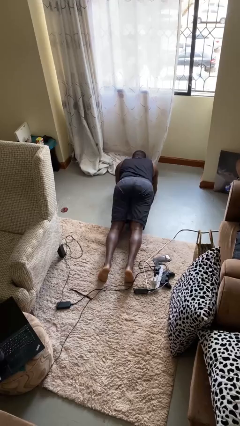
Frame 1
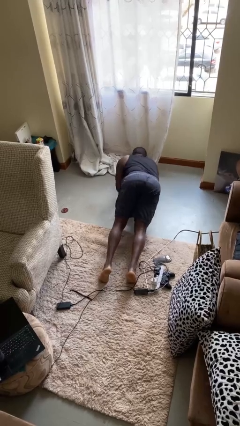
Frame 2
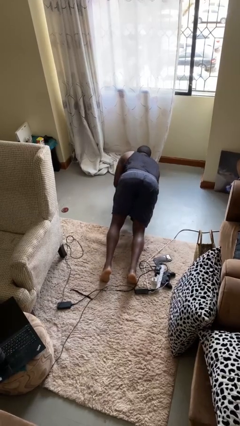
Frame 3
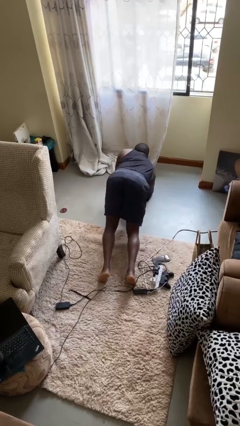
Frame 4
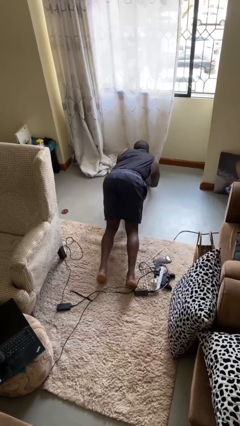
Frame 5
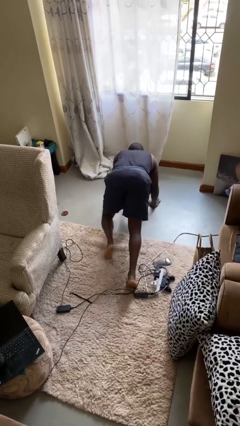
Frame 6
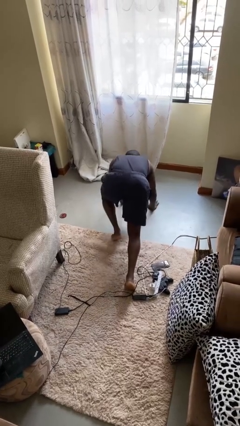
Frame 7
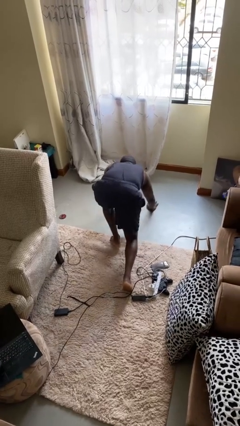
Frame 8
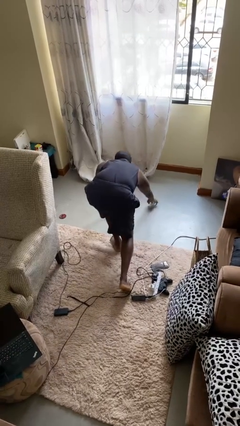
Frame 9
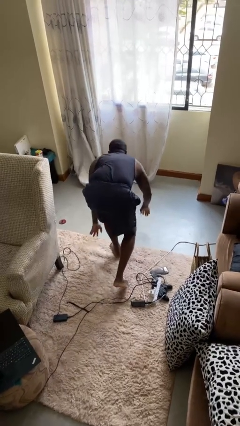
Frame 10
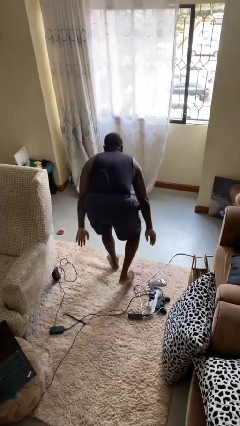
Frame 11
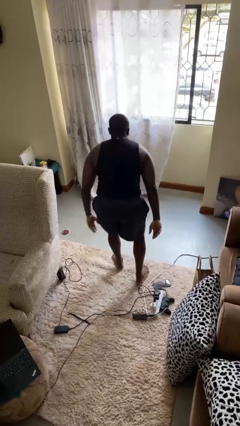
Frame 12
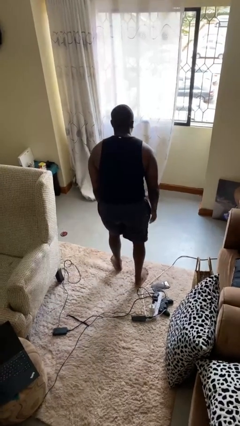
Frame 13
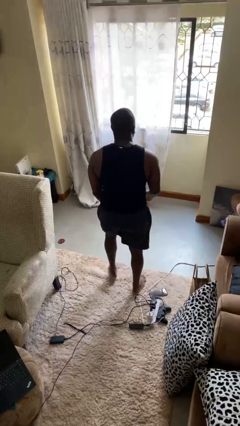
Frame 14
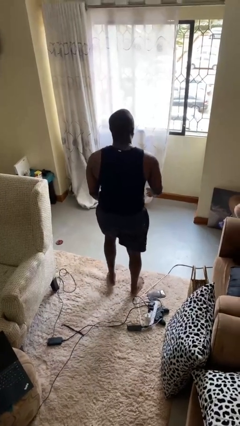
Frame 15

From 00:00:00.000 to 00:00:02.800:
person stands up from floor

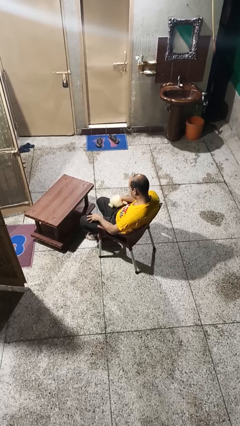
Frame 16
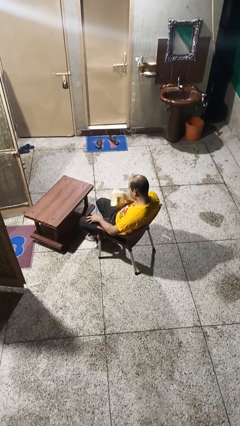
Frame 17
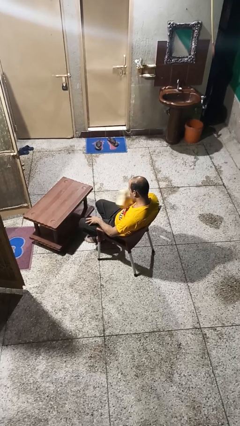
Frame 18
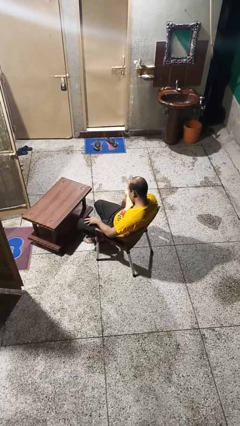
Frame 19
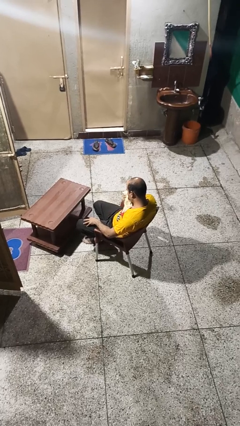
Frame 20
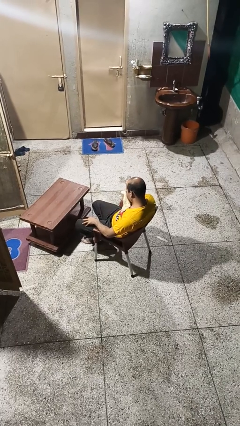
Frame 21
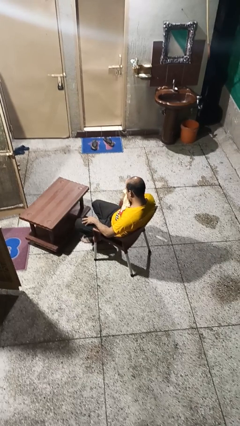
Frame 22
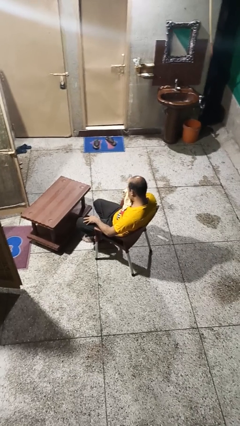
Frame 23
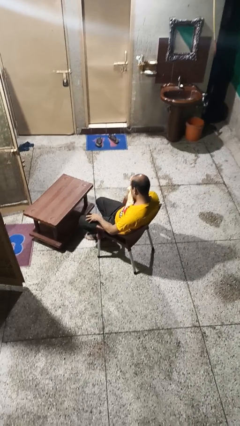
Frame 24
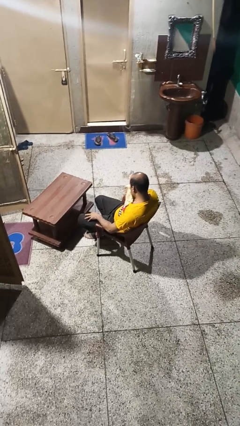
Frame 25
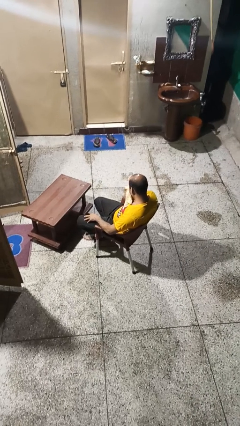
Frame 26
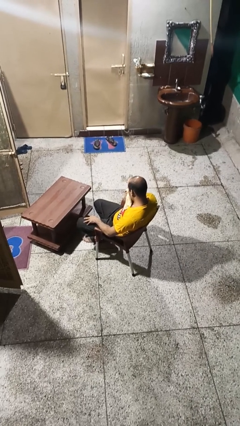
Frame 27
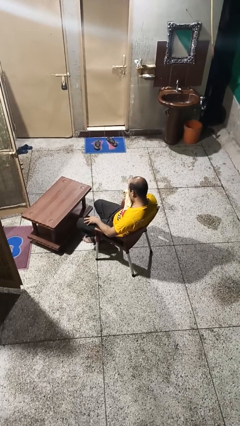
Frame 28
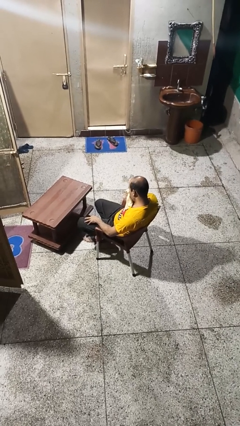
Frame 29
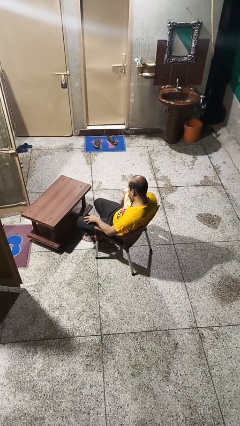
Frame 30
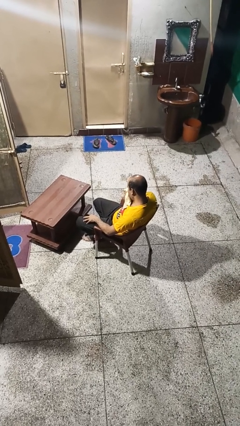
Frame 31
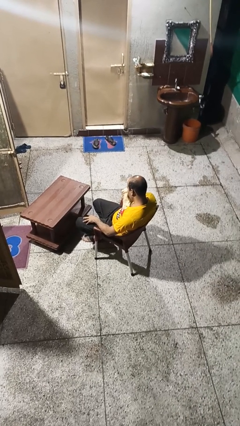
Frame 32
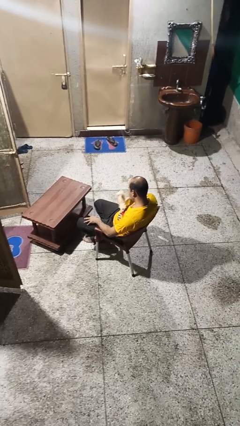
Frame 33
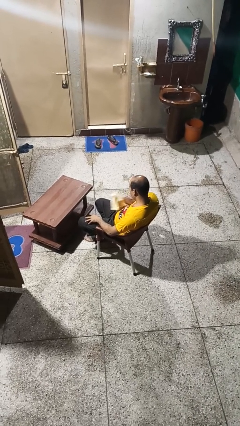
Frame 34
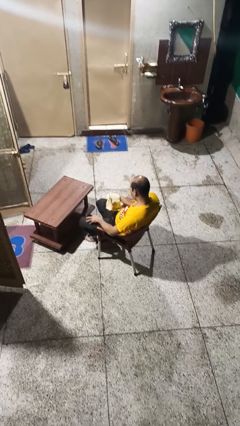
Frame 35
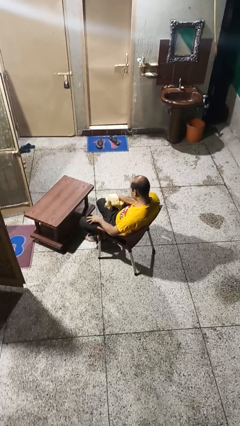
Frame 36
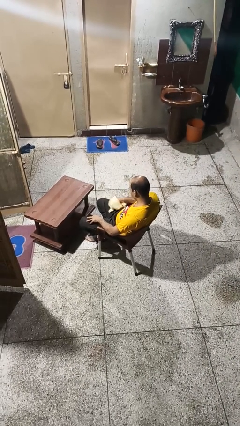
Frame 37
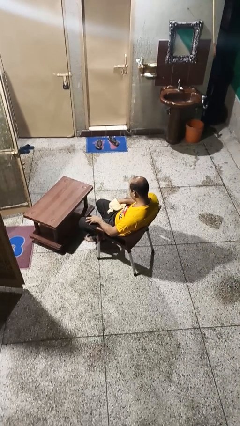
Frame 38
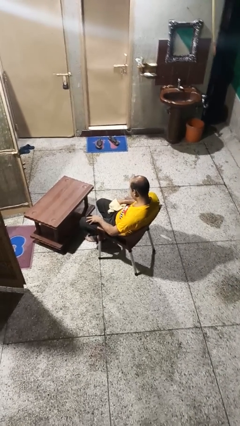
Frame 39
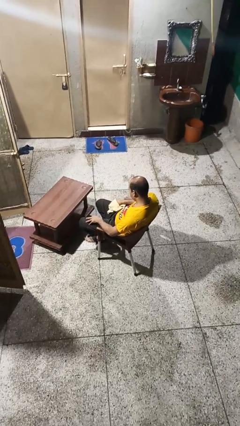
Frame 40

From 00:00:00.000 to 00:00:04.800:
person blows nose

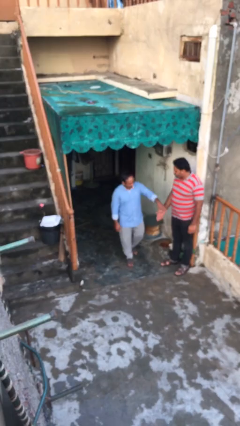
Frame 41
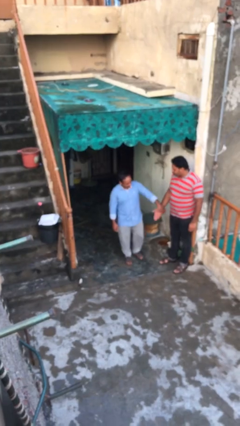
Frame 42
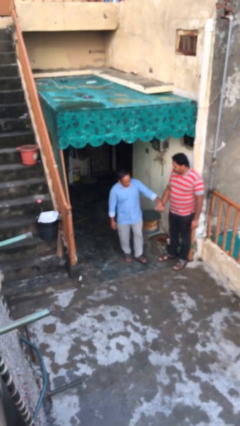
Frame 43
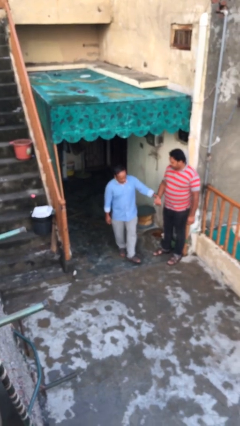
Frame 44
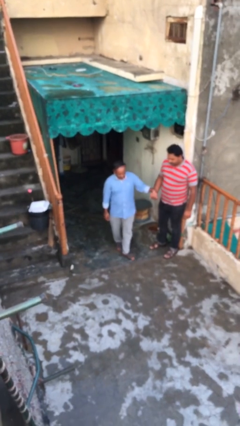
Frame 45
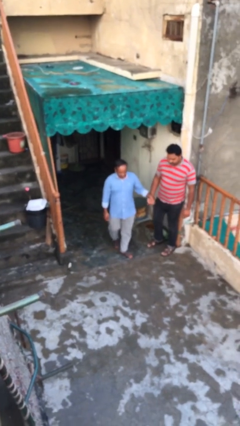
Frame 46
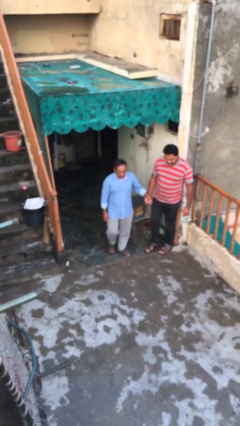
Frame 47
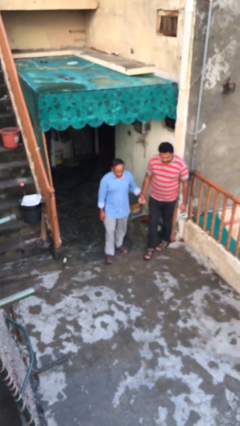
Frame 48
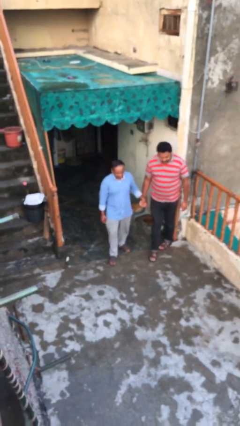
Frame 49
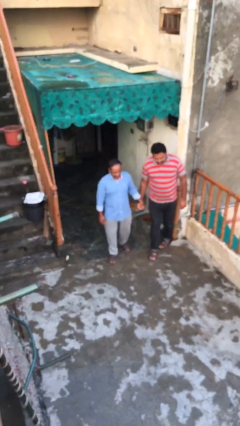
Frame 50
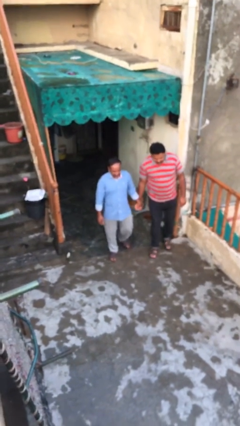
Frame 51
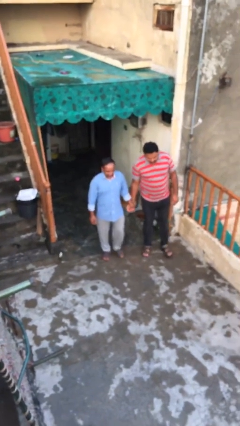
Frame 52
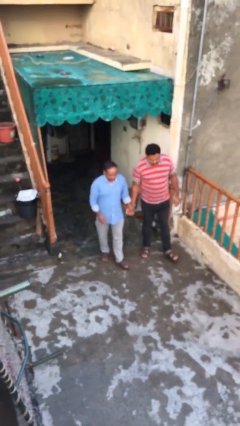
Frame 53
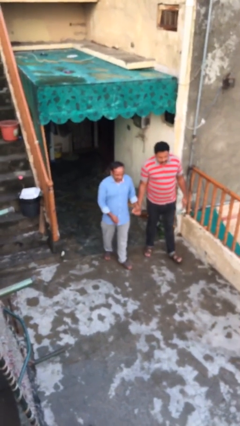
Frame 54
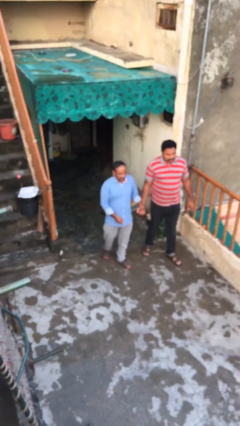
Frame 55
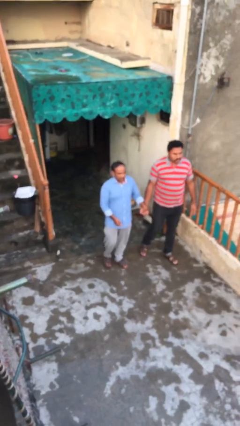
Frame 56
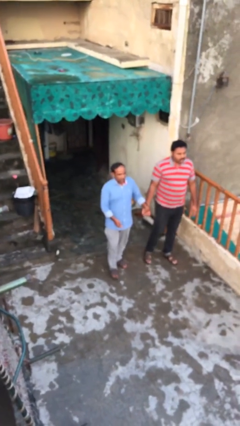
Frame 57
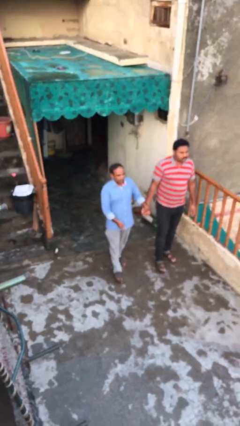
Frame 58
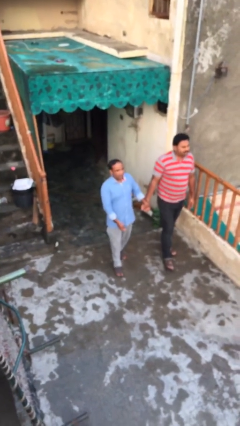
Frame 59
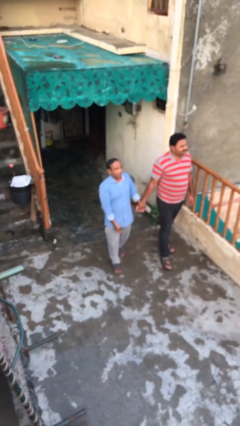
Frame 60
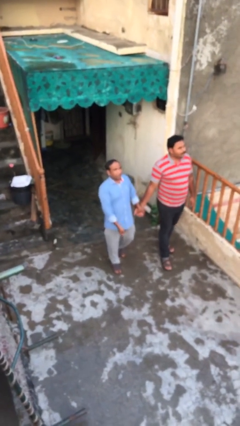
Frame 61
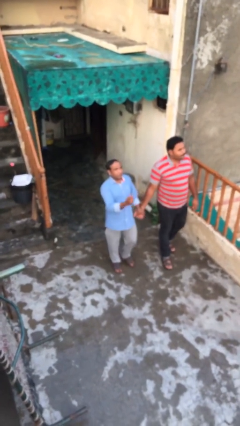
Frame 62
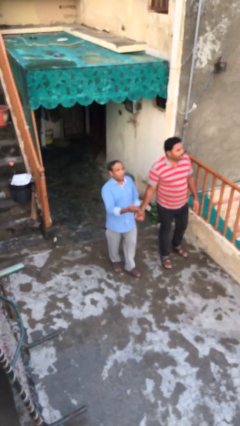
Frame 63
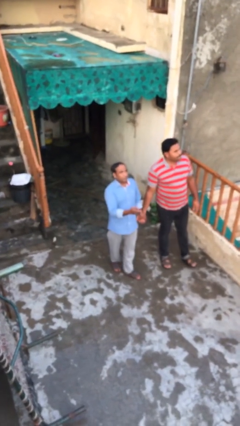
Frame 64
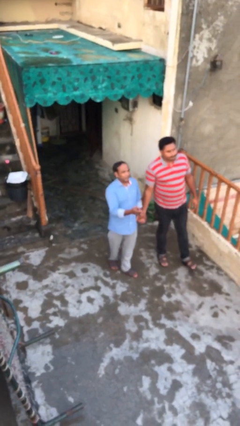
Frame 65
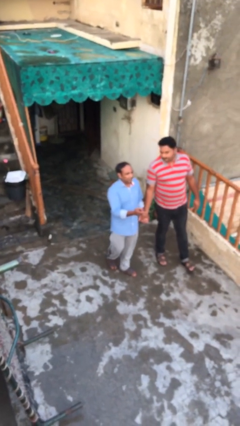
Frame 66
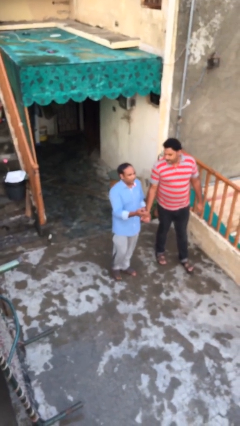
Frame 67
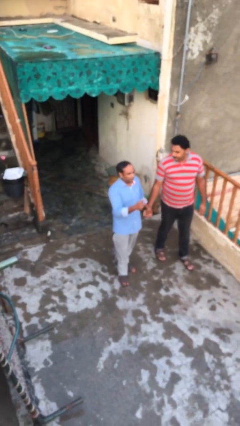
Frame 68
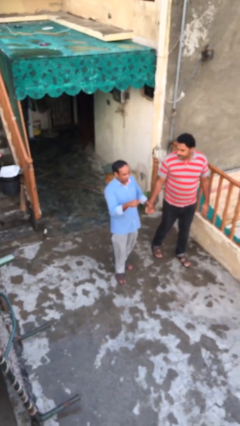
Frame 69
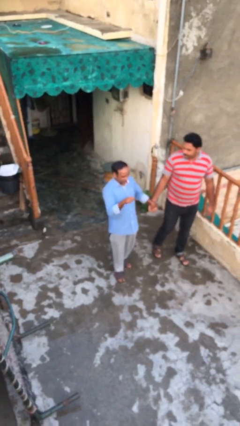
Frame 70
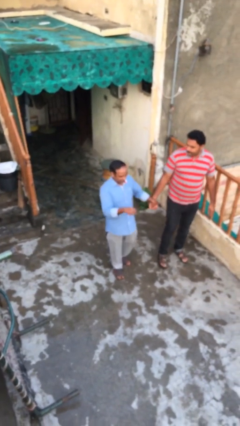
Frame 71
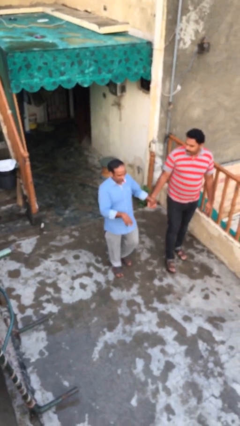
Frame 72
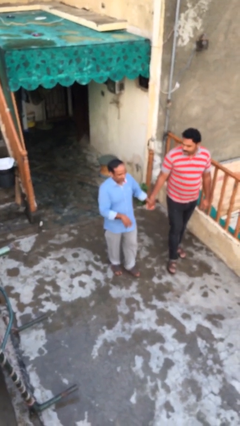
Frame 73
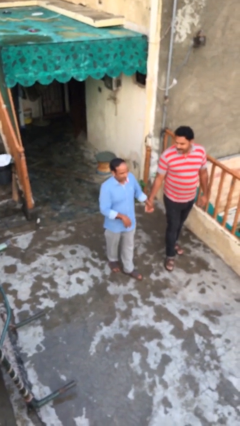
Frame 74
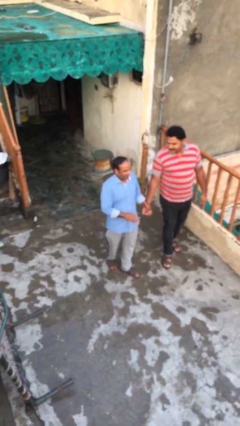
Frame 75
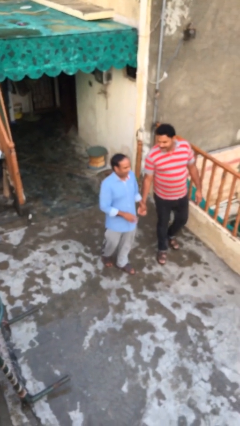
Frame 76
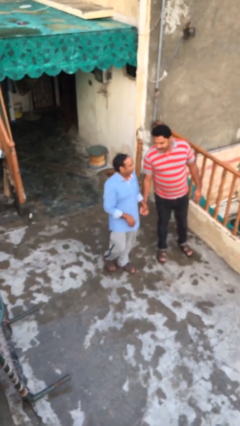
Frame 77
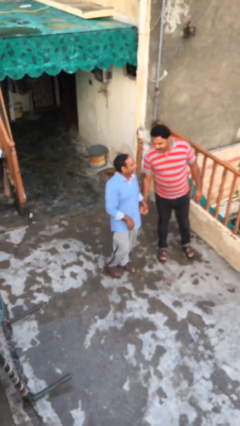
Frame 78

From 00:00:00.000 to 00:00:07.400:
person holds hand

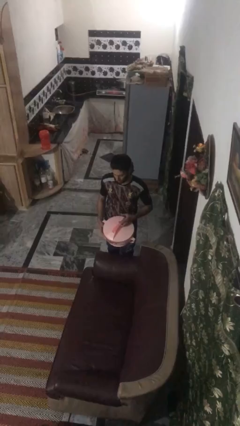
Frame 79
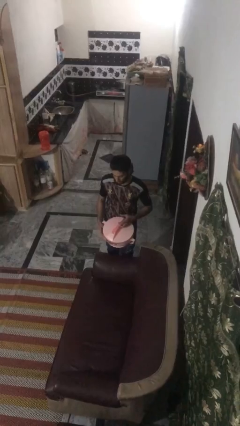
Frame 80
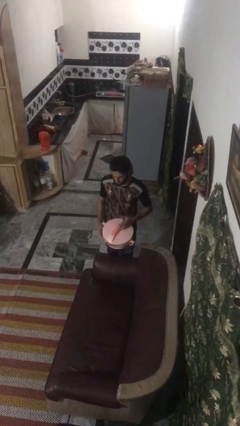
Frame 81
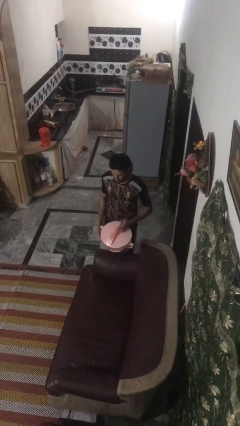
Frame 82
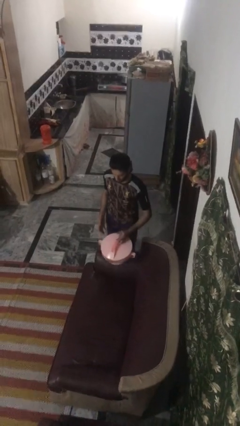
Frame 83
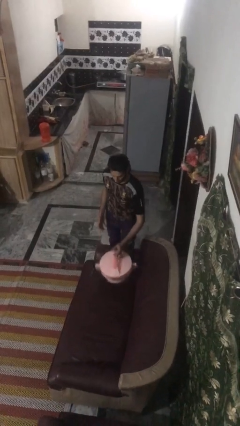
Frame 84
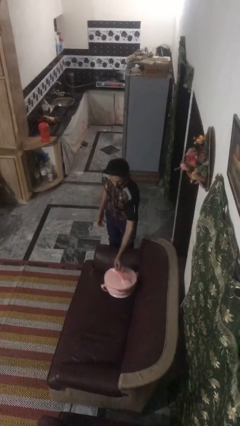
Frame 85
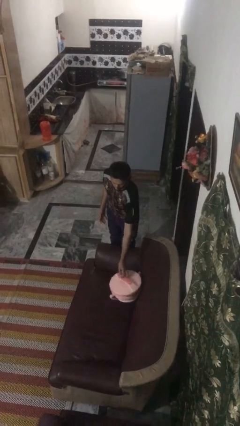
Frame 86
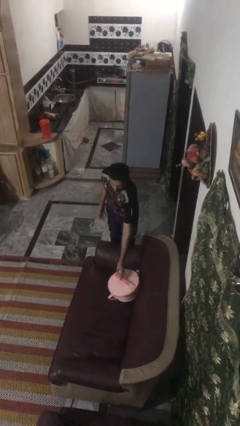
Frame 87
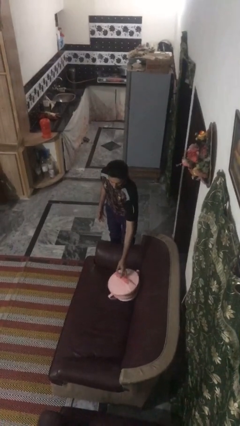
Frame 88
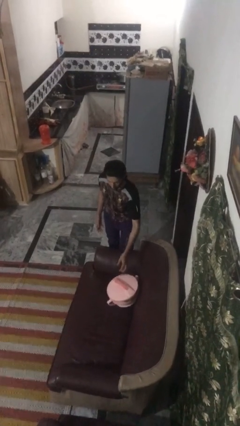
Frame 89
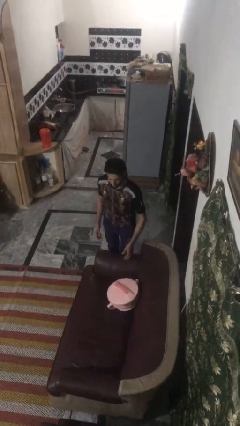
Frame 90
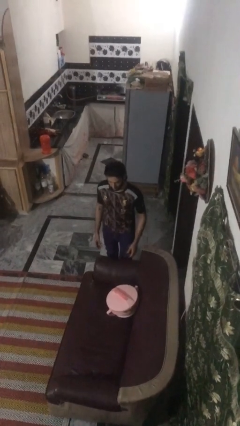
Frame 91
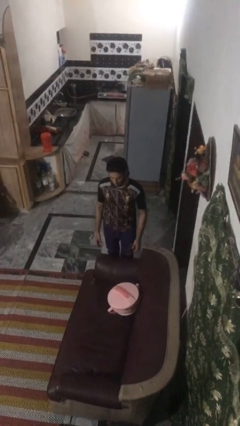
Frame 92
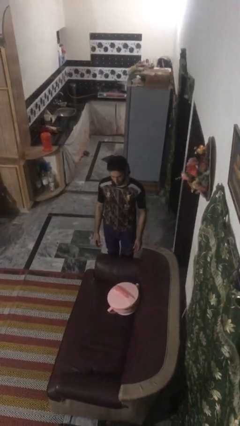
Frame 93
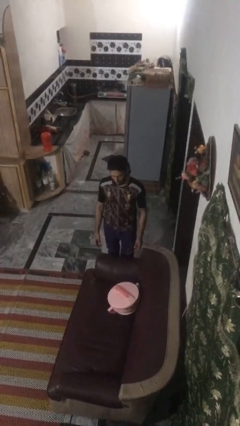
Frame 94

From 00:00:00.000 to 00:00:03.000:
person puts down object on couch

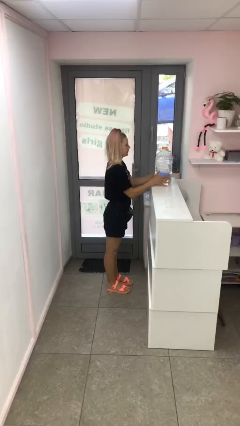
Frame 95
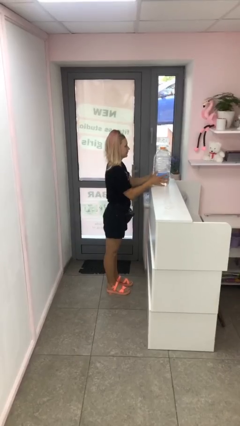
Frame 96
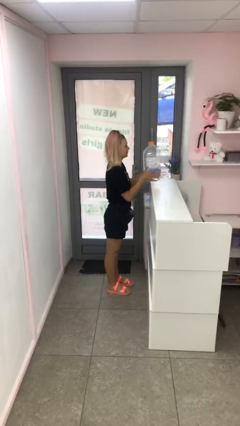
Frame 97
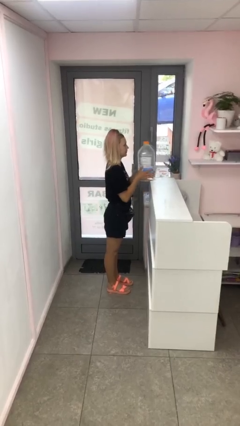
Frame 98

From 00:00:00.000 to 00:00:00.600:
person picks up object from countertop
